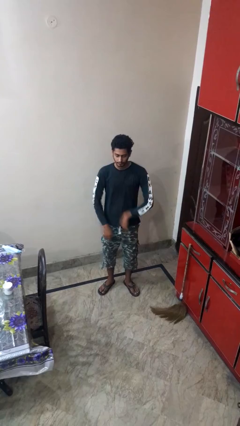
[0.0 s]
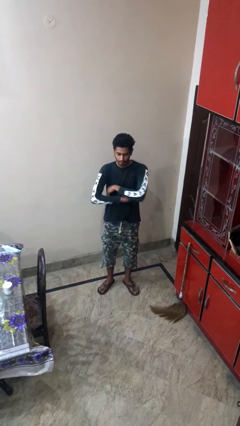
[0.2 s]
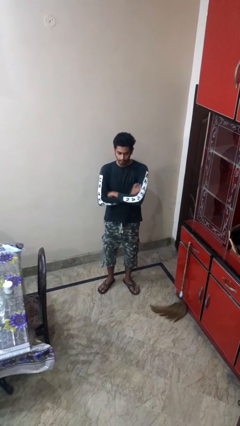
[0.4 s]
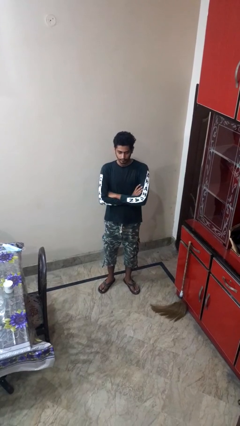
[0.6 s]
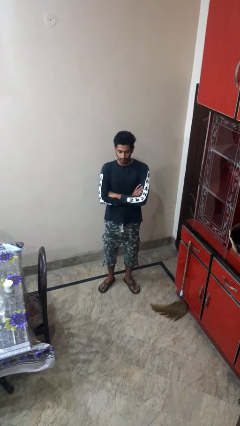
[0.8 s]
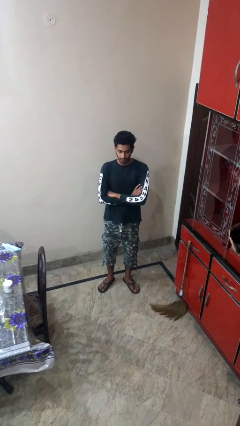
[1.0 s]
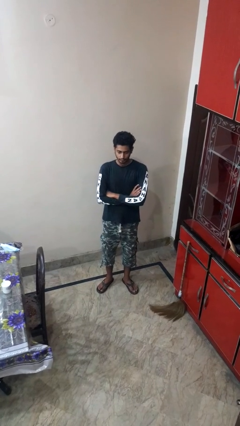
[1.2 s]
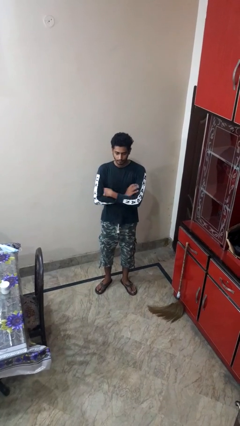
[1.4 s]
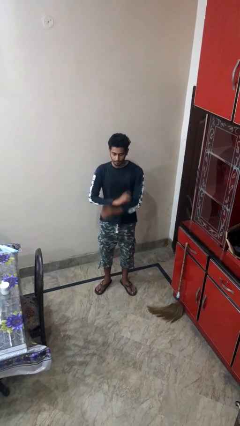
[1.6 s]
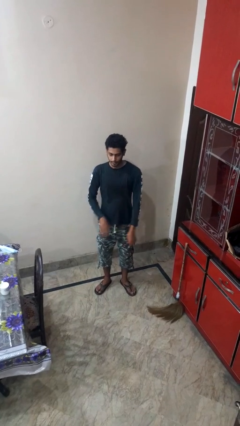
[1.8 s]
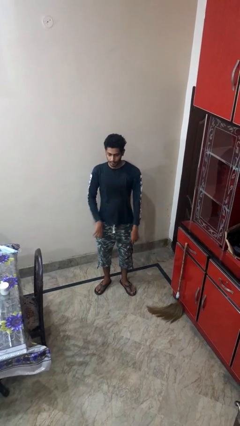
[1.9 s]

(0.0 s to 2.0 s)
person crosses arms

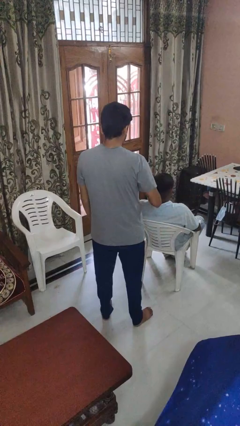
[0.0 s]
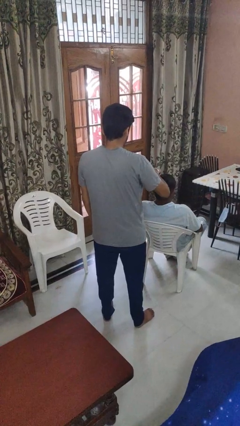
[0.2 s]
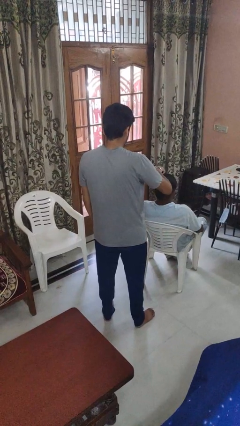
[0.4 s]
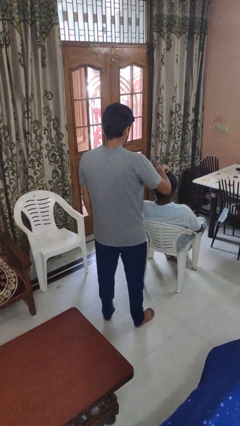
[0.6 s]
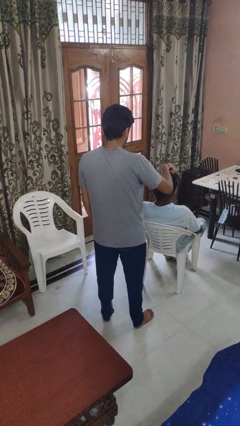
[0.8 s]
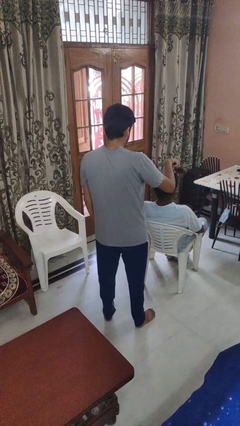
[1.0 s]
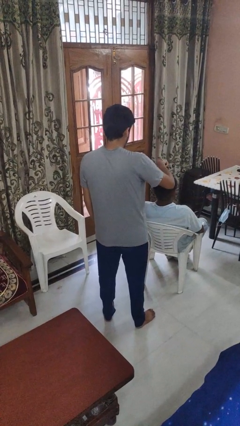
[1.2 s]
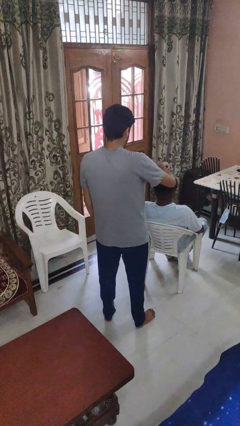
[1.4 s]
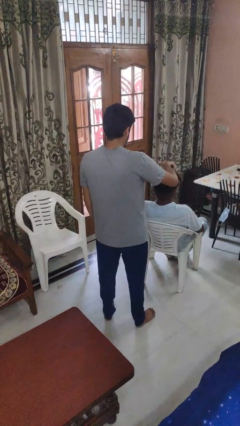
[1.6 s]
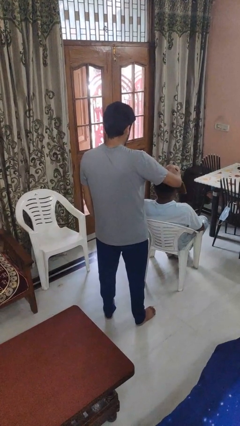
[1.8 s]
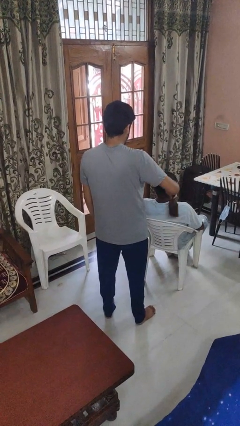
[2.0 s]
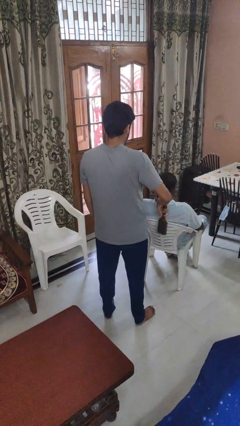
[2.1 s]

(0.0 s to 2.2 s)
person brushes hair of person

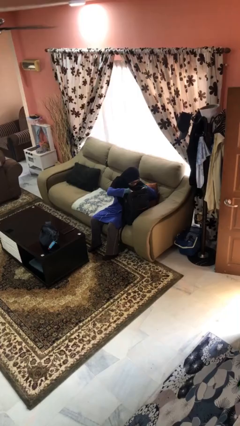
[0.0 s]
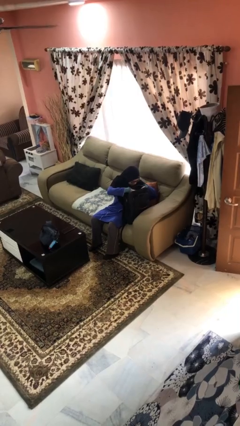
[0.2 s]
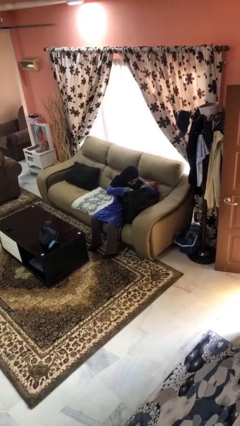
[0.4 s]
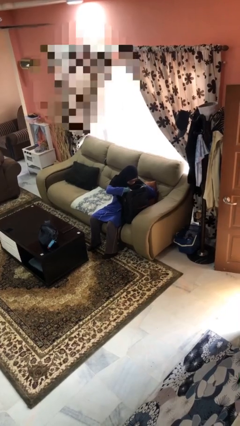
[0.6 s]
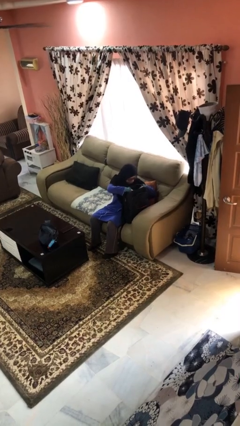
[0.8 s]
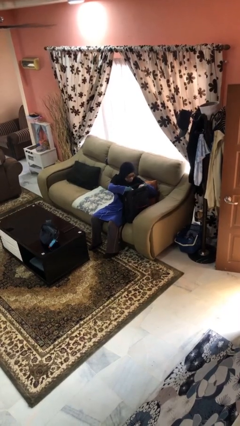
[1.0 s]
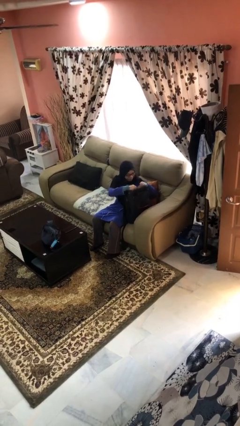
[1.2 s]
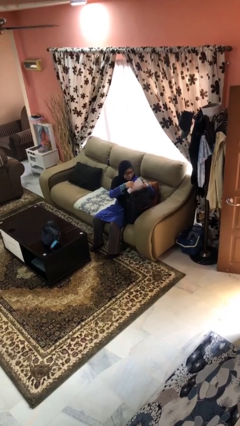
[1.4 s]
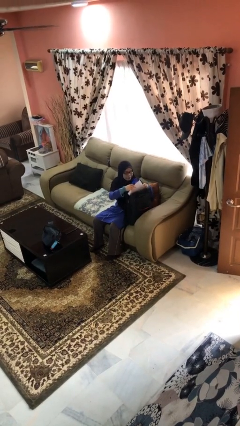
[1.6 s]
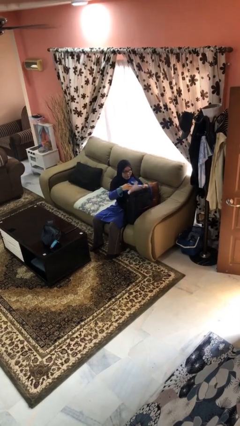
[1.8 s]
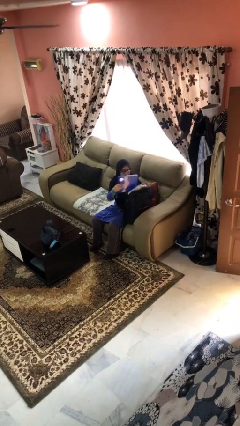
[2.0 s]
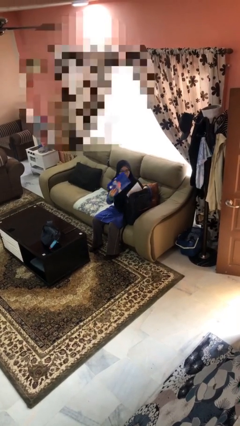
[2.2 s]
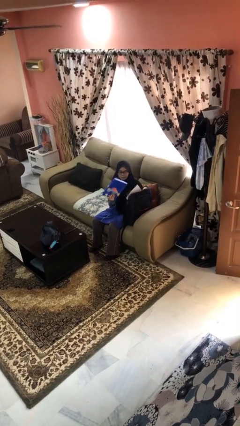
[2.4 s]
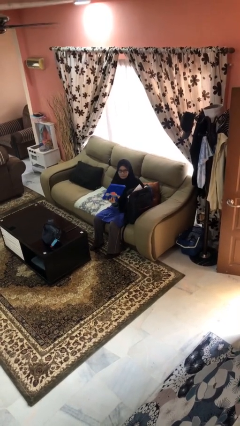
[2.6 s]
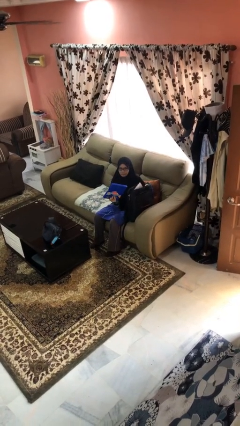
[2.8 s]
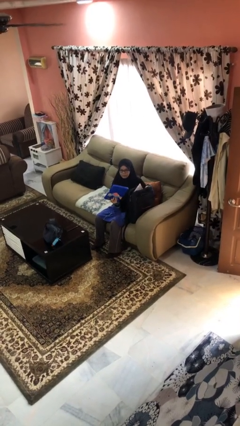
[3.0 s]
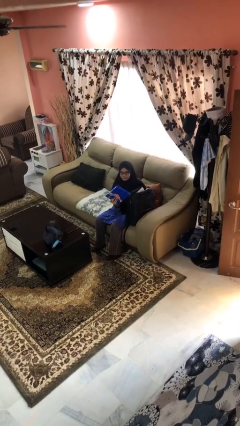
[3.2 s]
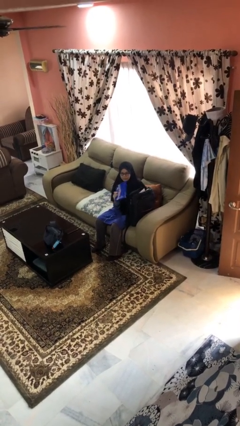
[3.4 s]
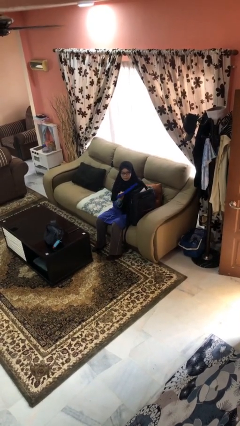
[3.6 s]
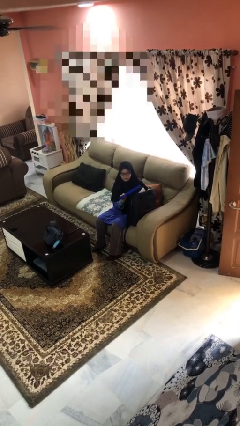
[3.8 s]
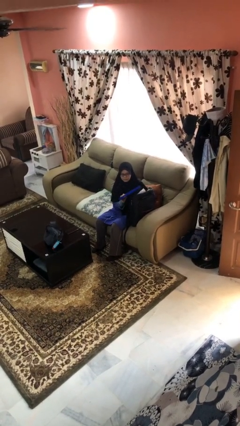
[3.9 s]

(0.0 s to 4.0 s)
person takes object from backpack

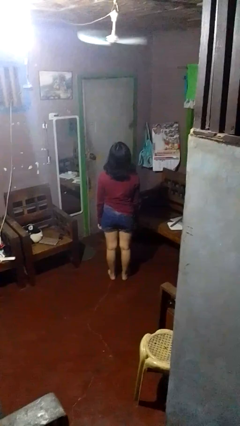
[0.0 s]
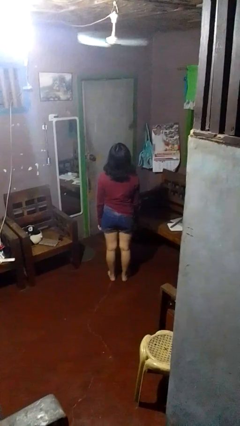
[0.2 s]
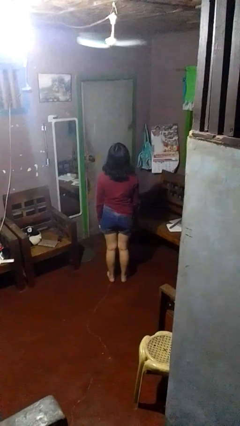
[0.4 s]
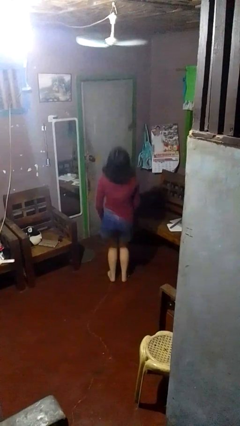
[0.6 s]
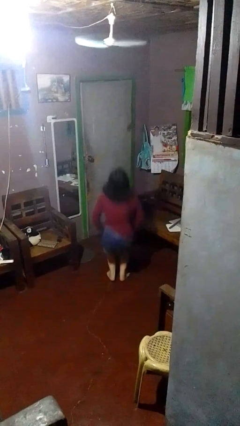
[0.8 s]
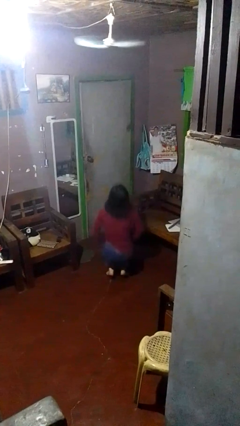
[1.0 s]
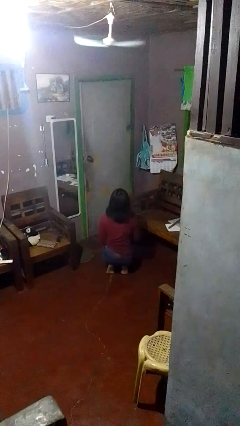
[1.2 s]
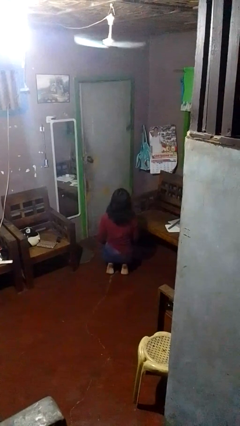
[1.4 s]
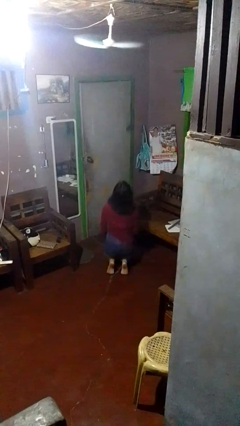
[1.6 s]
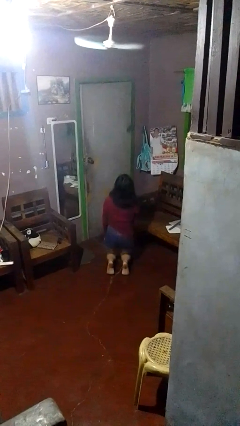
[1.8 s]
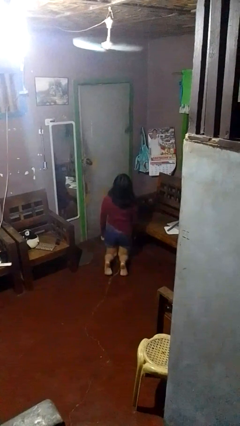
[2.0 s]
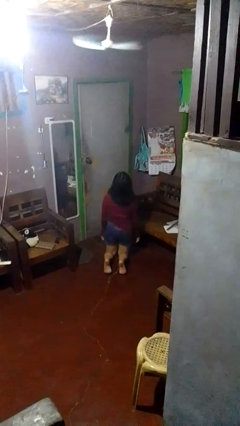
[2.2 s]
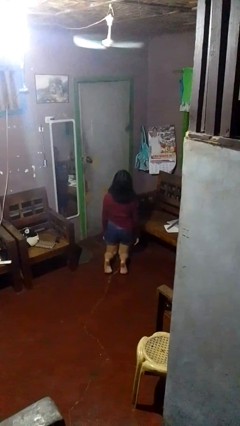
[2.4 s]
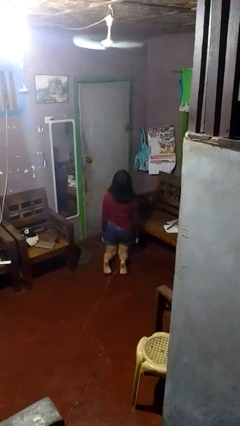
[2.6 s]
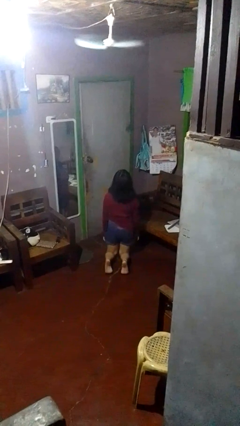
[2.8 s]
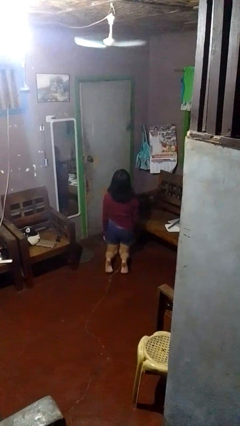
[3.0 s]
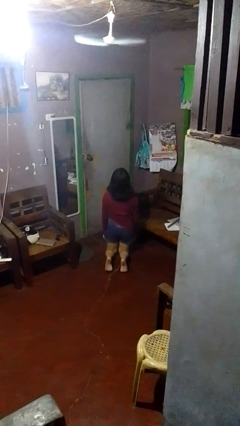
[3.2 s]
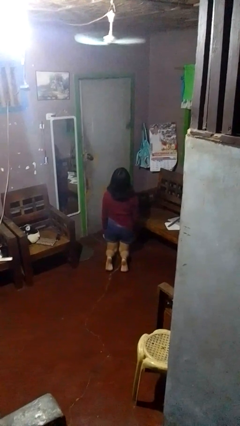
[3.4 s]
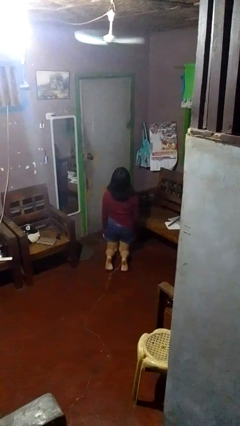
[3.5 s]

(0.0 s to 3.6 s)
person kneels

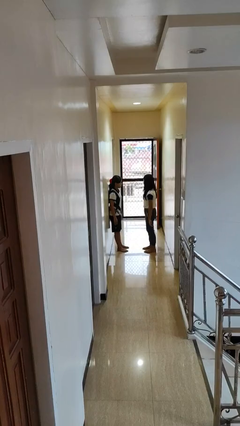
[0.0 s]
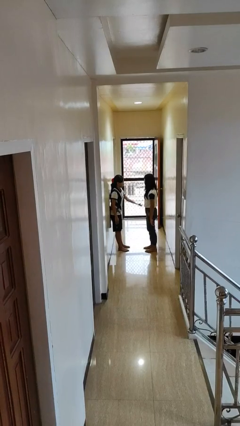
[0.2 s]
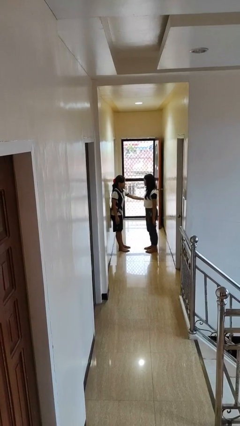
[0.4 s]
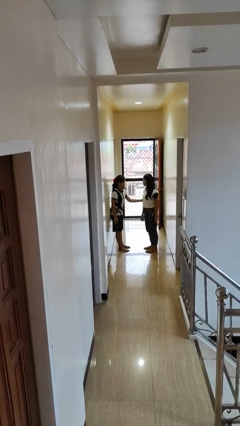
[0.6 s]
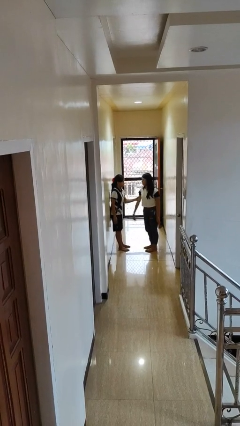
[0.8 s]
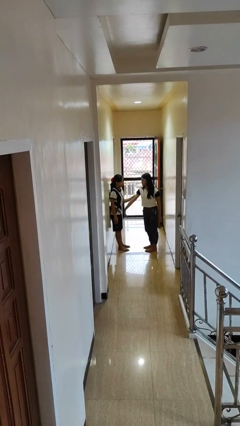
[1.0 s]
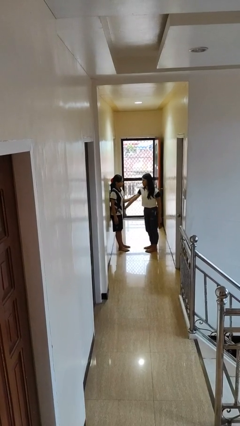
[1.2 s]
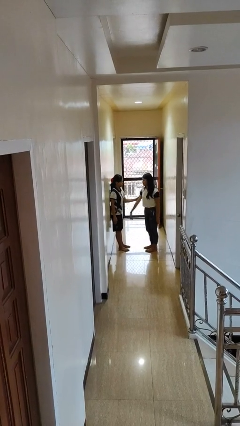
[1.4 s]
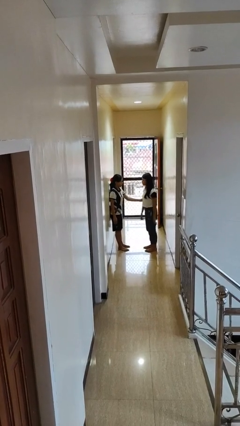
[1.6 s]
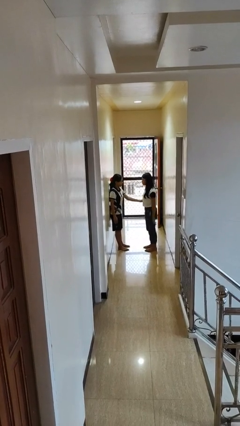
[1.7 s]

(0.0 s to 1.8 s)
person grabs person by bicep

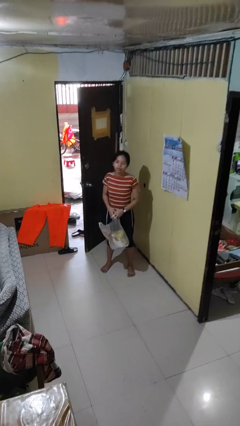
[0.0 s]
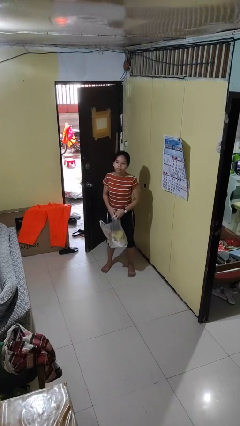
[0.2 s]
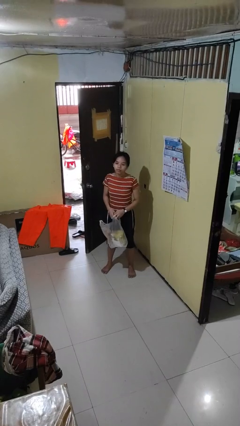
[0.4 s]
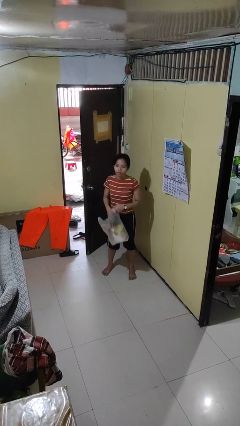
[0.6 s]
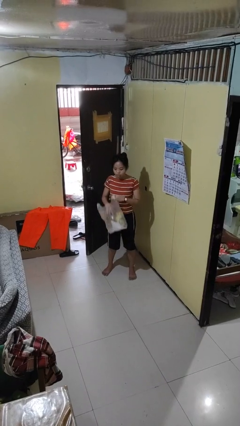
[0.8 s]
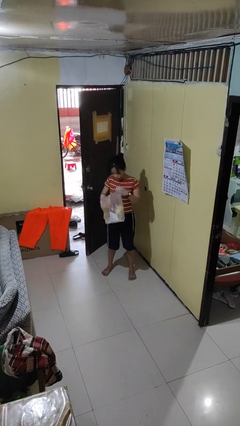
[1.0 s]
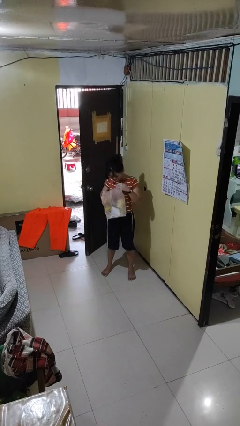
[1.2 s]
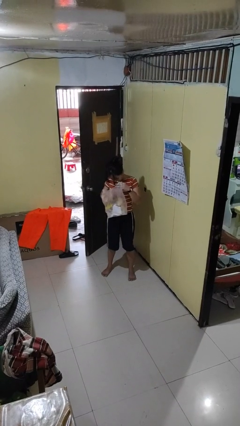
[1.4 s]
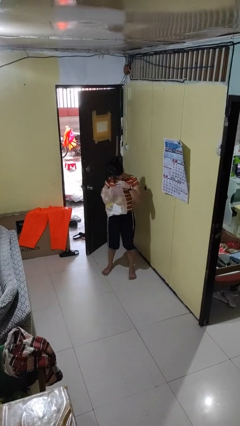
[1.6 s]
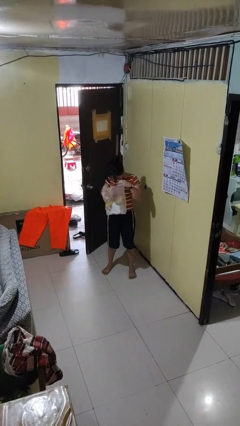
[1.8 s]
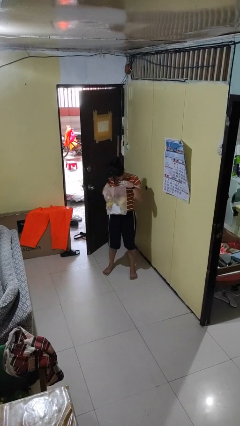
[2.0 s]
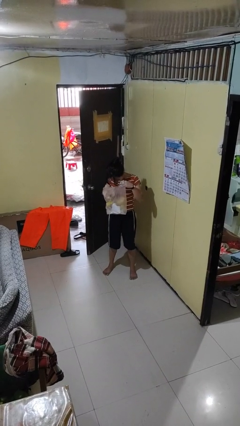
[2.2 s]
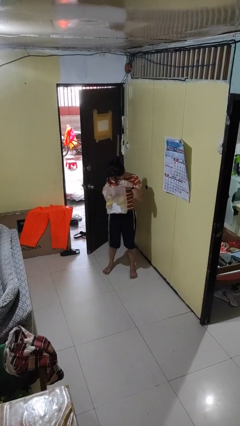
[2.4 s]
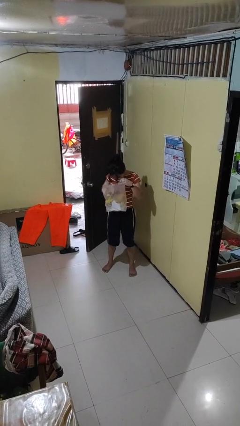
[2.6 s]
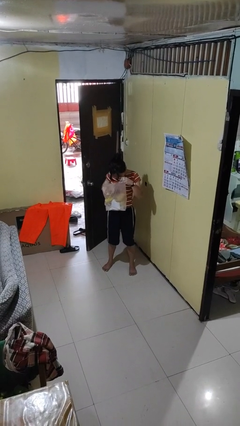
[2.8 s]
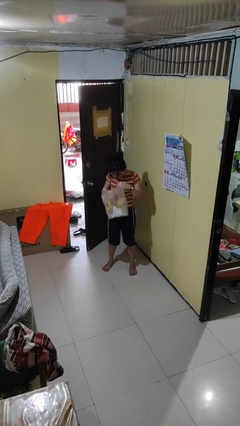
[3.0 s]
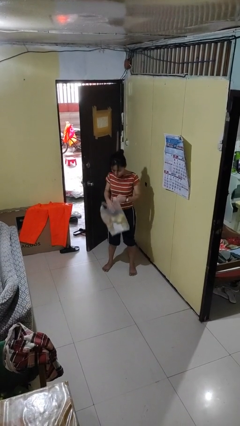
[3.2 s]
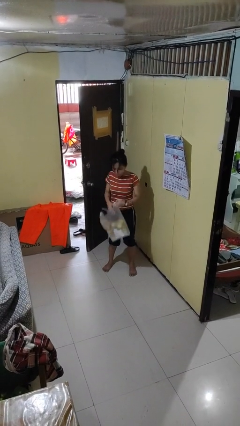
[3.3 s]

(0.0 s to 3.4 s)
person searches in bag
